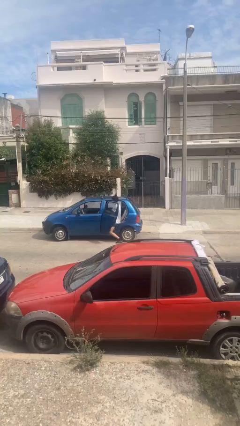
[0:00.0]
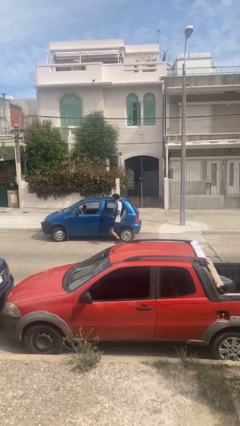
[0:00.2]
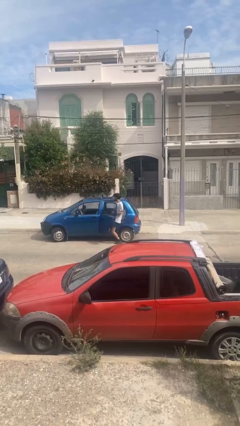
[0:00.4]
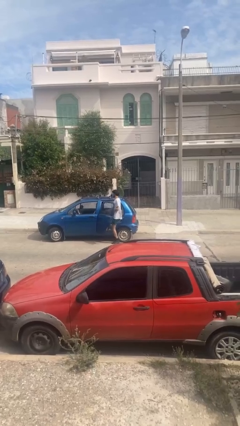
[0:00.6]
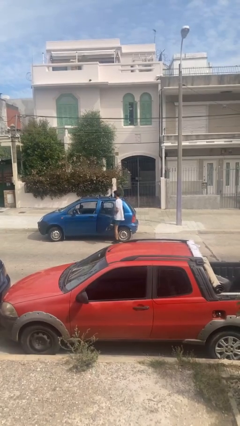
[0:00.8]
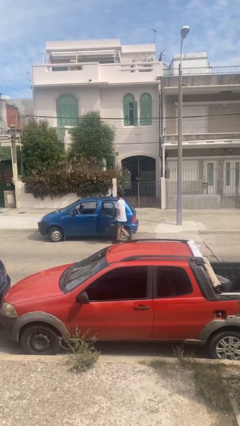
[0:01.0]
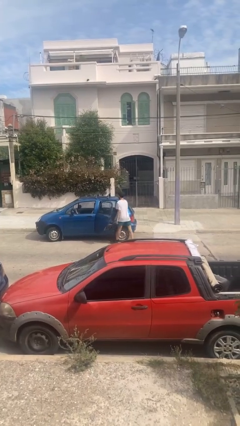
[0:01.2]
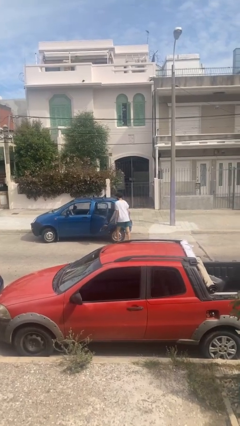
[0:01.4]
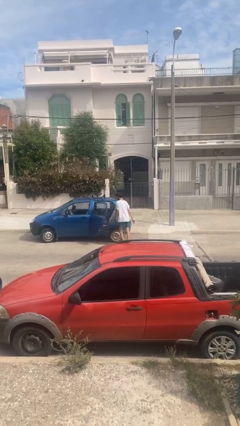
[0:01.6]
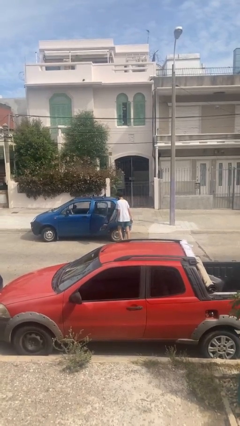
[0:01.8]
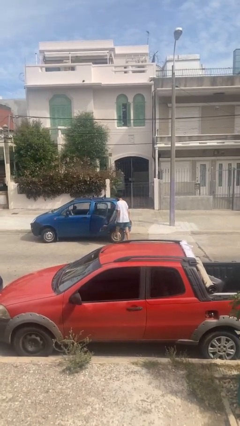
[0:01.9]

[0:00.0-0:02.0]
person exits car

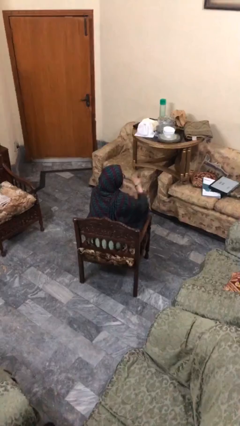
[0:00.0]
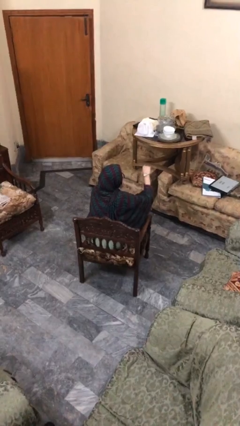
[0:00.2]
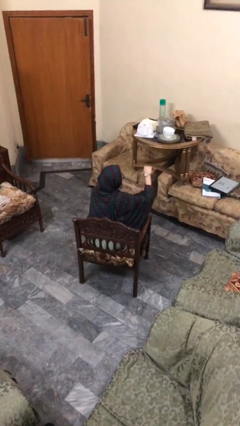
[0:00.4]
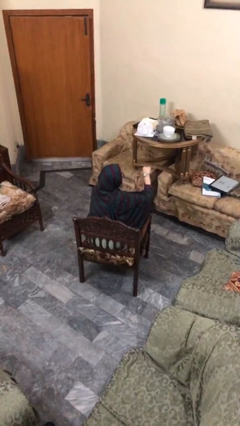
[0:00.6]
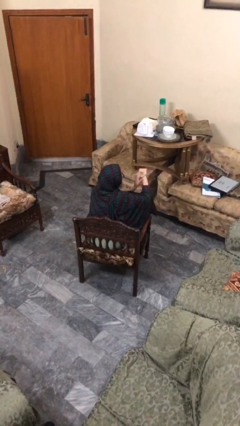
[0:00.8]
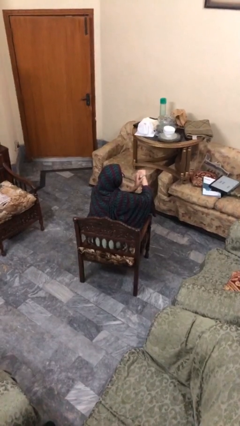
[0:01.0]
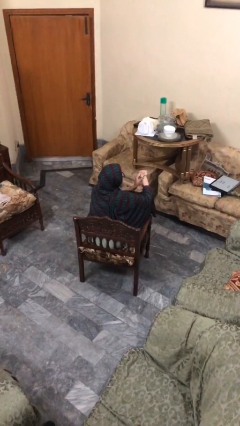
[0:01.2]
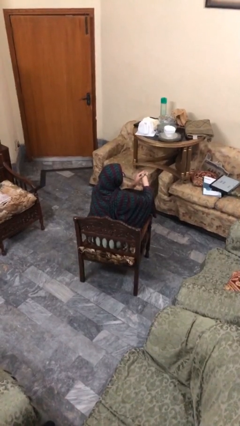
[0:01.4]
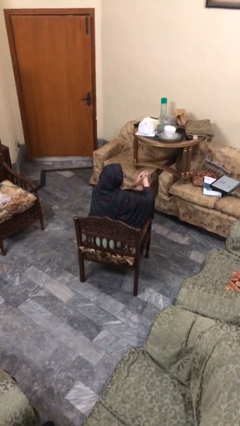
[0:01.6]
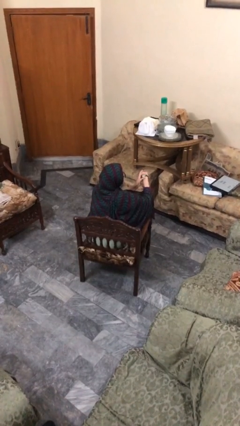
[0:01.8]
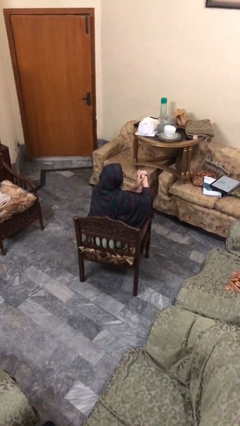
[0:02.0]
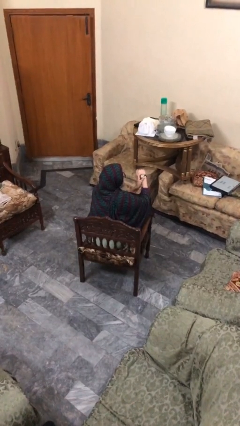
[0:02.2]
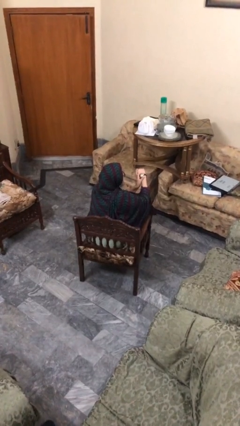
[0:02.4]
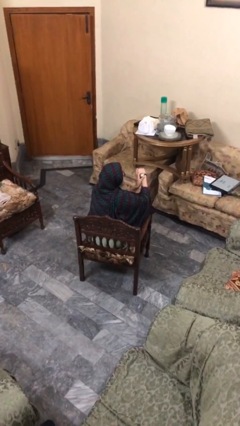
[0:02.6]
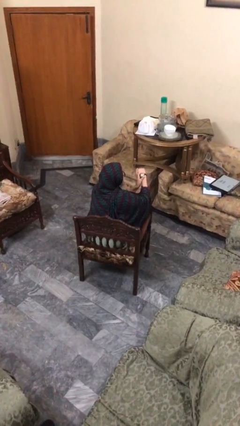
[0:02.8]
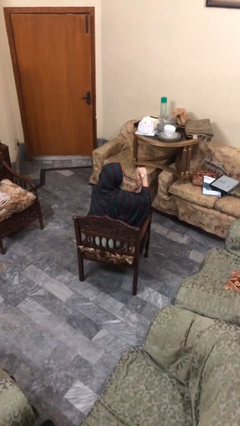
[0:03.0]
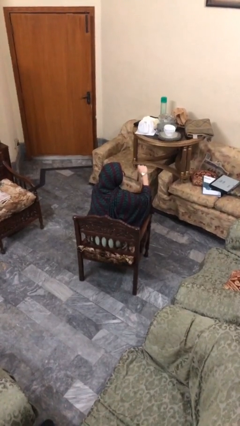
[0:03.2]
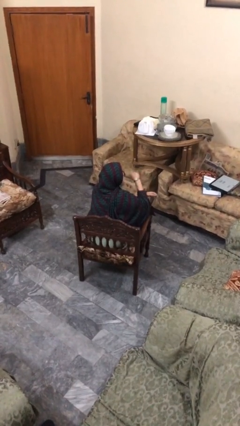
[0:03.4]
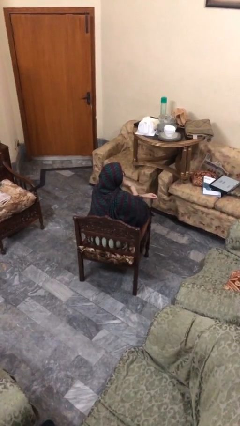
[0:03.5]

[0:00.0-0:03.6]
person looks at wristwatch

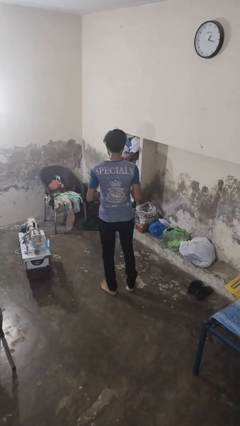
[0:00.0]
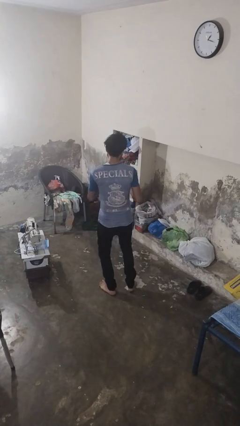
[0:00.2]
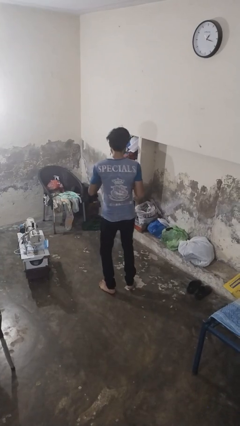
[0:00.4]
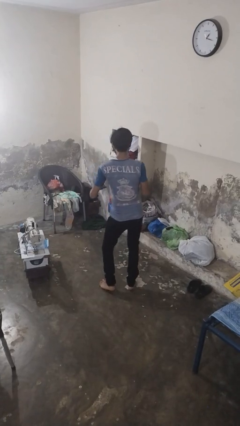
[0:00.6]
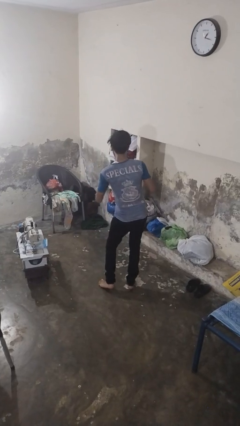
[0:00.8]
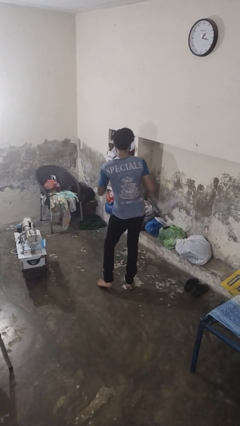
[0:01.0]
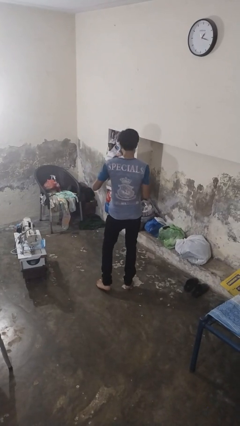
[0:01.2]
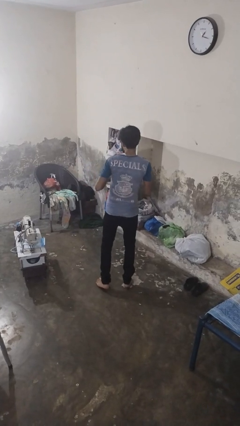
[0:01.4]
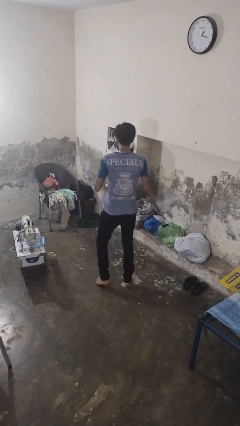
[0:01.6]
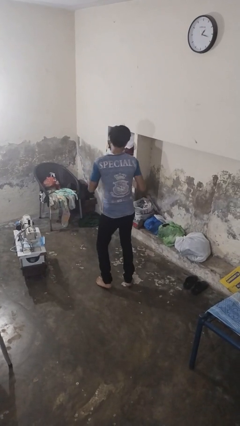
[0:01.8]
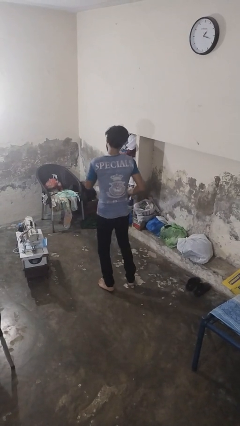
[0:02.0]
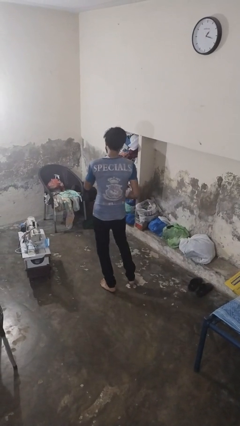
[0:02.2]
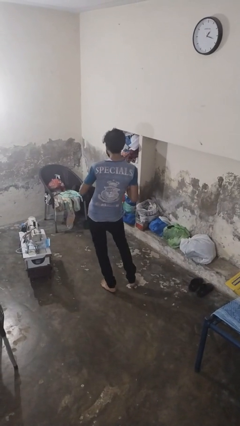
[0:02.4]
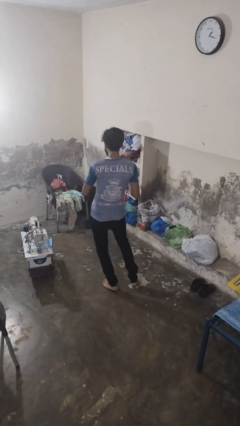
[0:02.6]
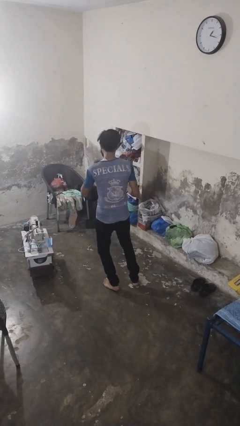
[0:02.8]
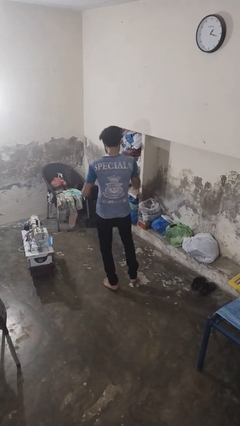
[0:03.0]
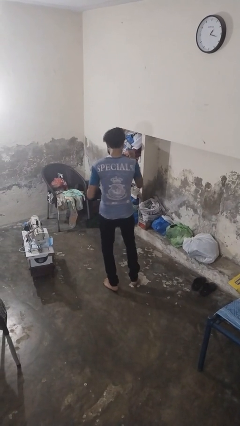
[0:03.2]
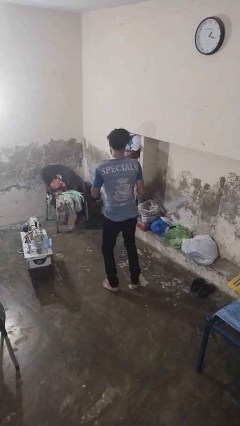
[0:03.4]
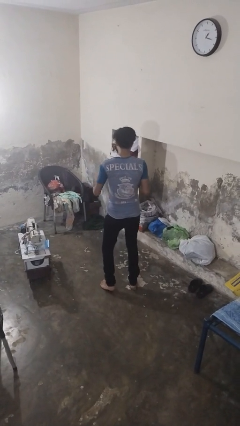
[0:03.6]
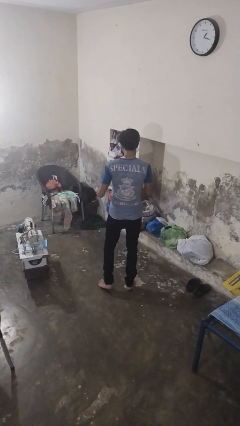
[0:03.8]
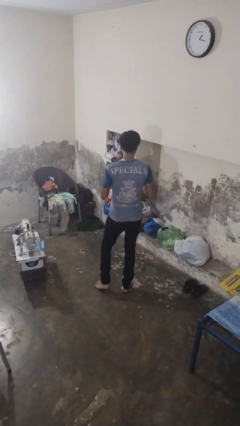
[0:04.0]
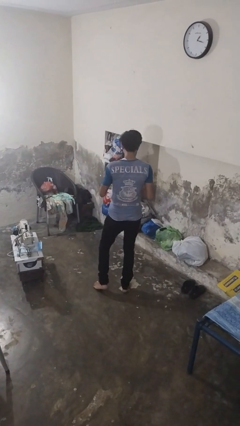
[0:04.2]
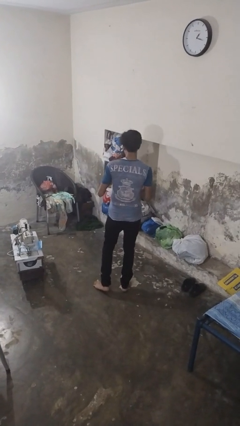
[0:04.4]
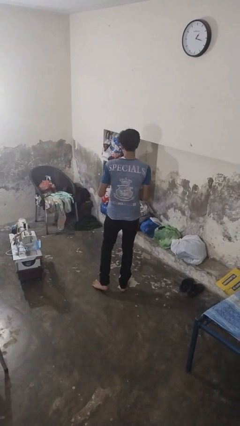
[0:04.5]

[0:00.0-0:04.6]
person dances in place

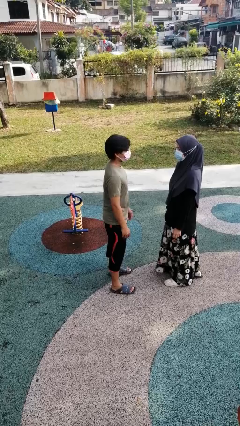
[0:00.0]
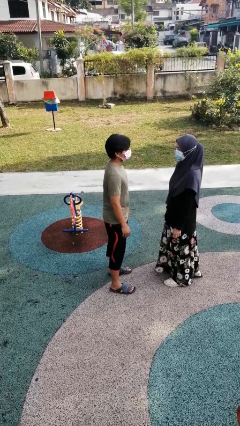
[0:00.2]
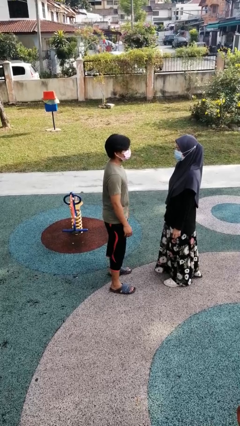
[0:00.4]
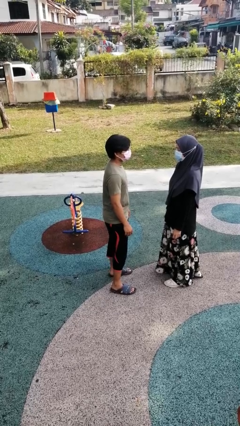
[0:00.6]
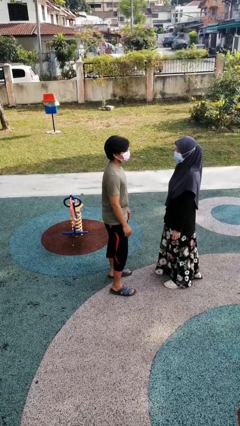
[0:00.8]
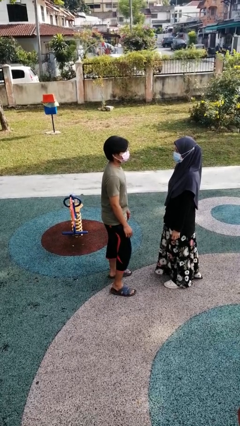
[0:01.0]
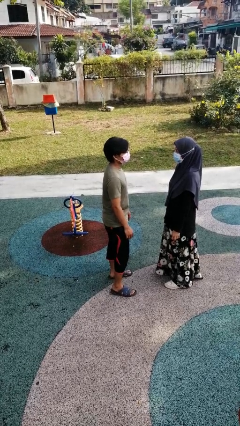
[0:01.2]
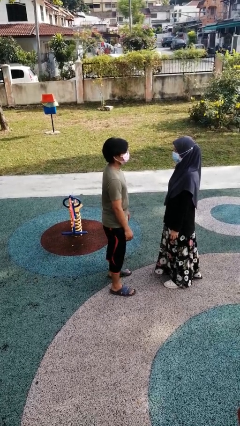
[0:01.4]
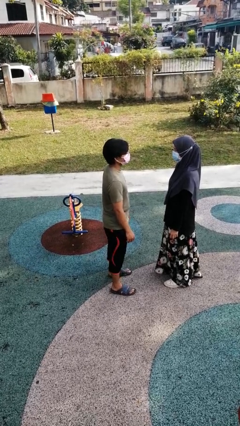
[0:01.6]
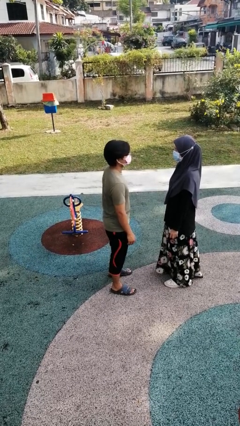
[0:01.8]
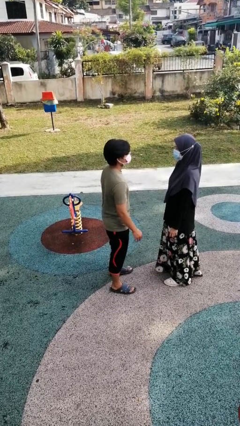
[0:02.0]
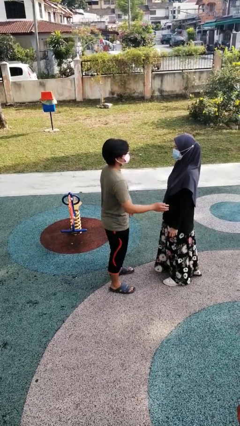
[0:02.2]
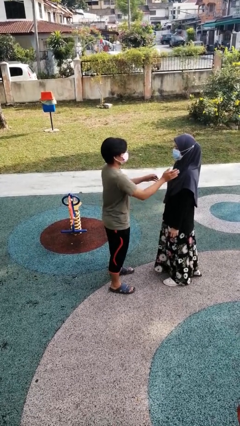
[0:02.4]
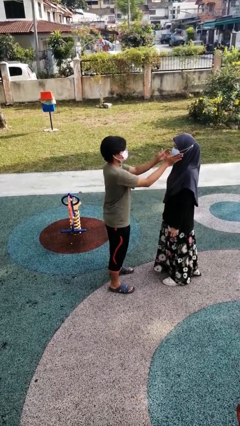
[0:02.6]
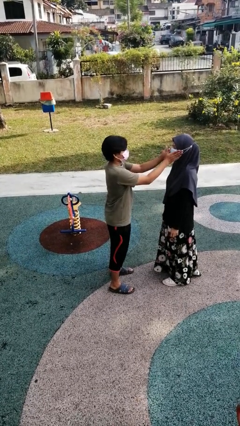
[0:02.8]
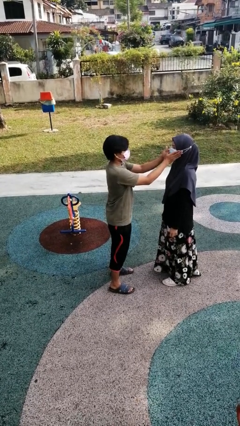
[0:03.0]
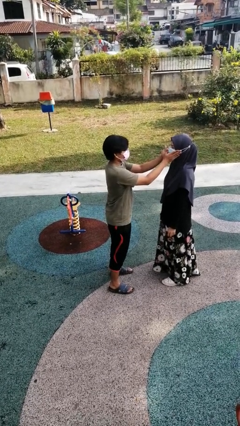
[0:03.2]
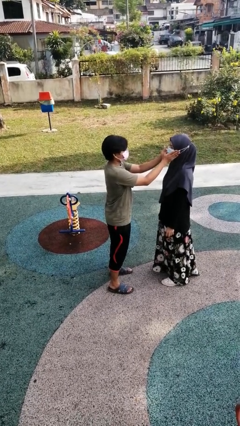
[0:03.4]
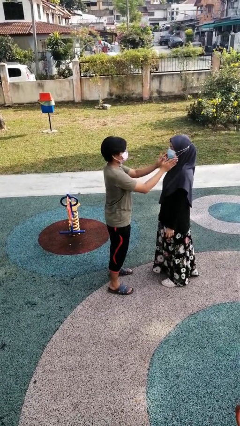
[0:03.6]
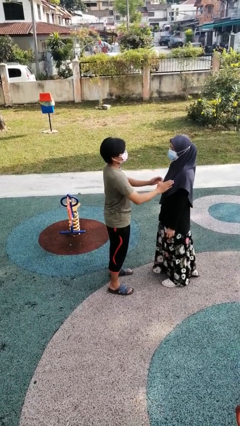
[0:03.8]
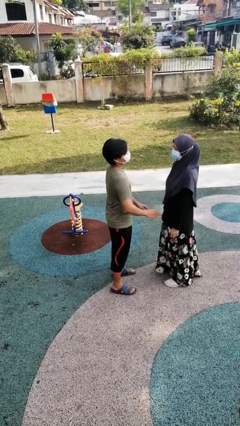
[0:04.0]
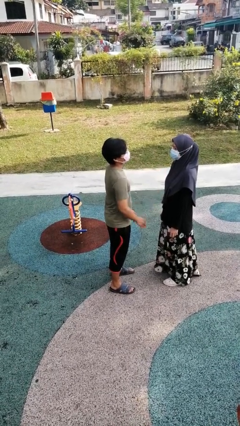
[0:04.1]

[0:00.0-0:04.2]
person touches face of person

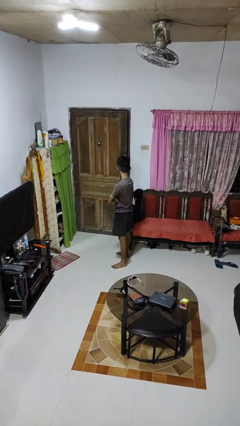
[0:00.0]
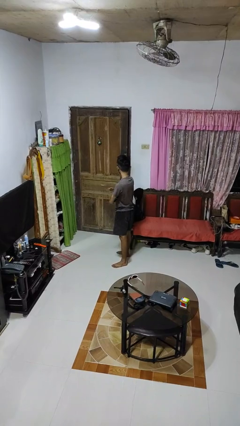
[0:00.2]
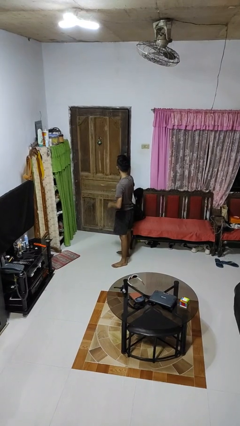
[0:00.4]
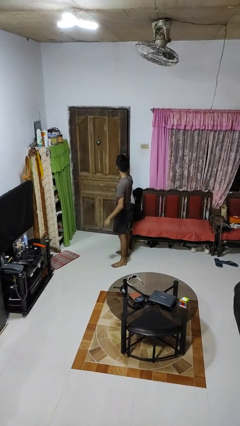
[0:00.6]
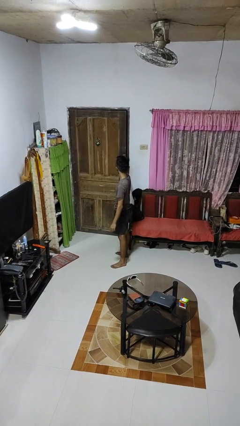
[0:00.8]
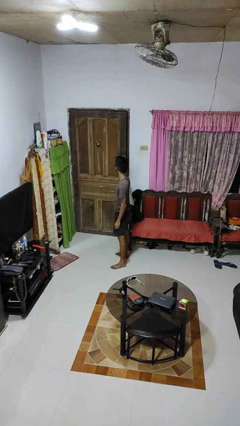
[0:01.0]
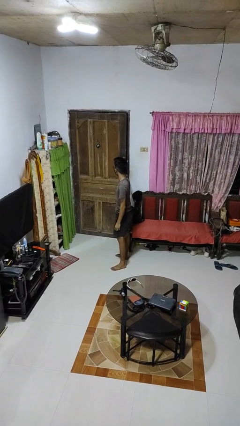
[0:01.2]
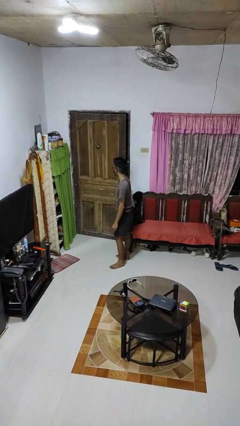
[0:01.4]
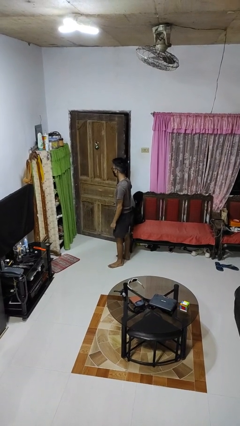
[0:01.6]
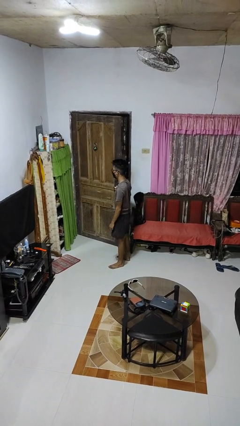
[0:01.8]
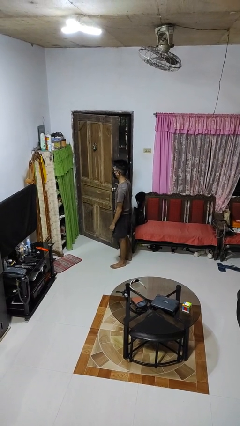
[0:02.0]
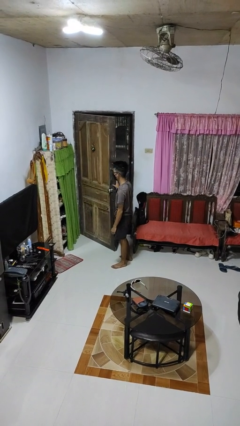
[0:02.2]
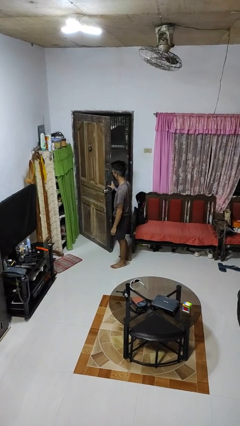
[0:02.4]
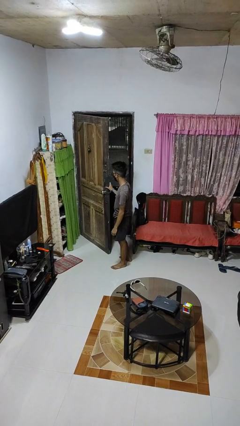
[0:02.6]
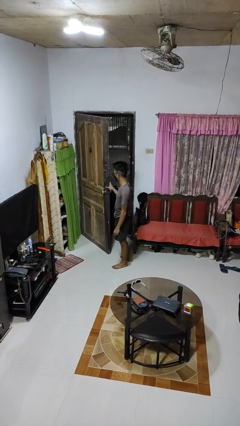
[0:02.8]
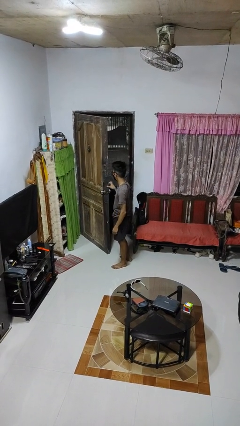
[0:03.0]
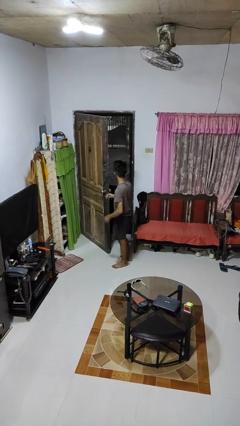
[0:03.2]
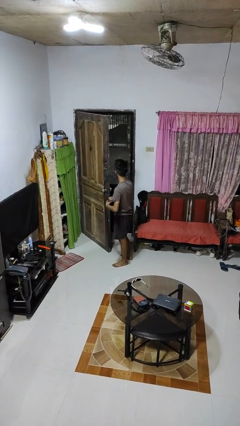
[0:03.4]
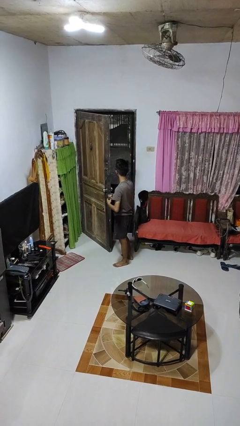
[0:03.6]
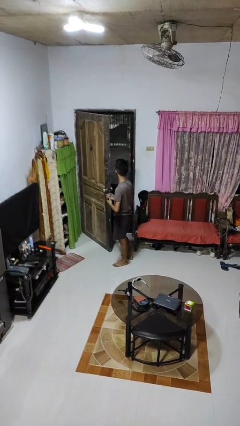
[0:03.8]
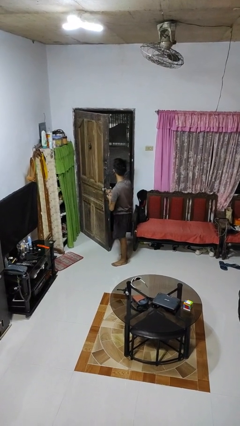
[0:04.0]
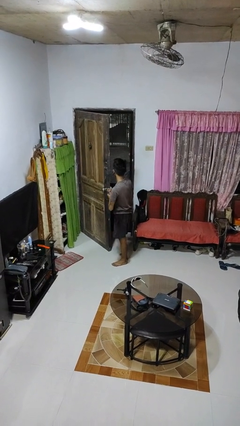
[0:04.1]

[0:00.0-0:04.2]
person opens facility door
